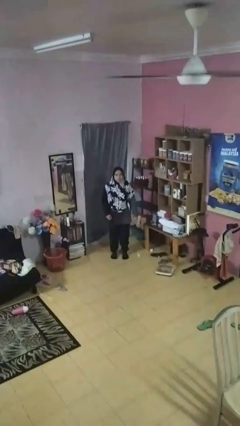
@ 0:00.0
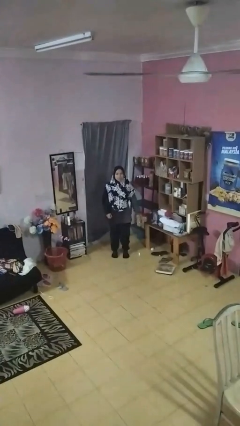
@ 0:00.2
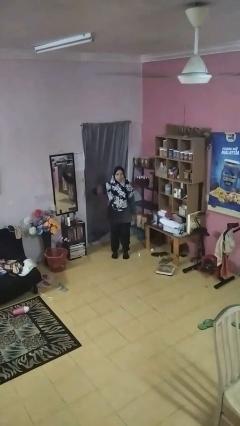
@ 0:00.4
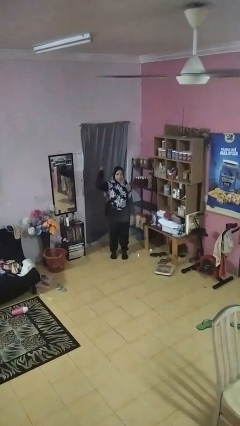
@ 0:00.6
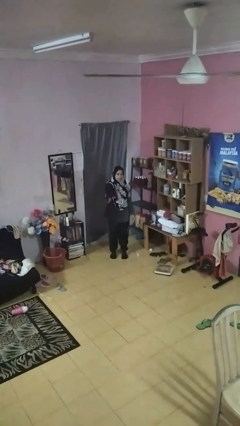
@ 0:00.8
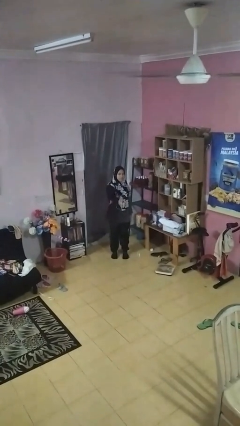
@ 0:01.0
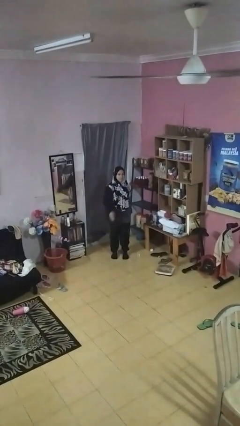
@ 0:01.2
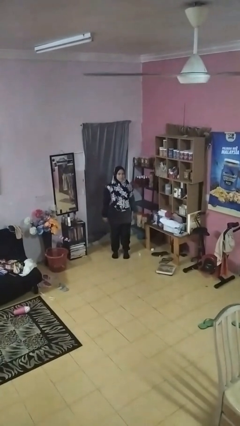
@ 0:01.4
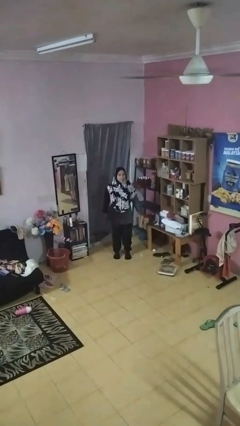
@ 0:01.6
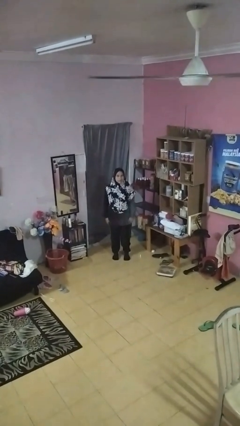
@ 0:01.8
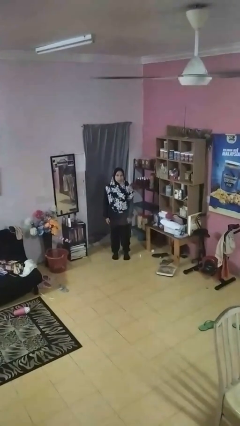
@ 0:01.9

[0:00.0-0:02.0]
person karate chop

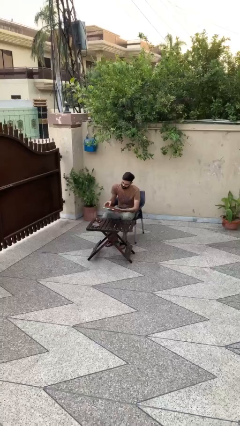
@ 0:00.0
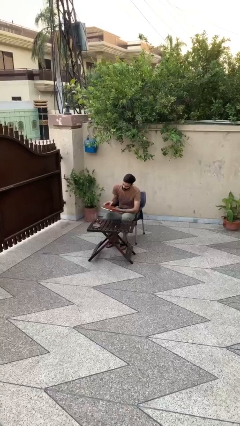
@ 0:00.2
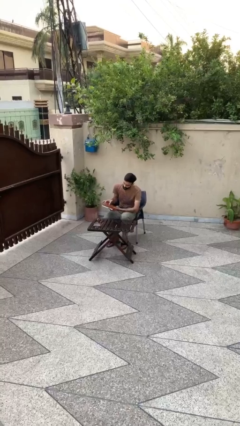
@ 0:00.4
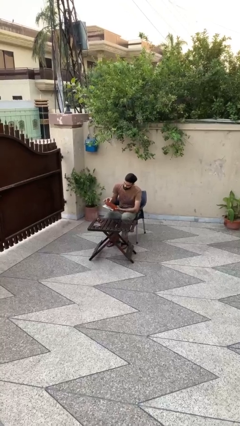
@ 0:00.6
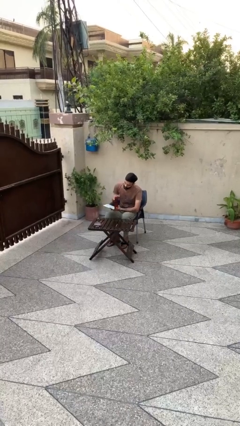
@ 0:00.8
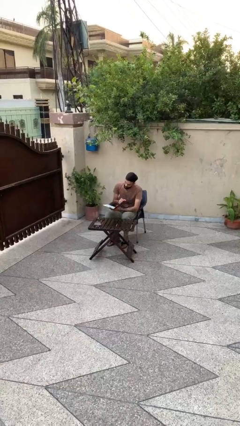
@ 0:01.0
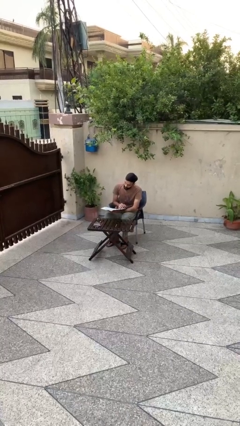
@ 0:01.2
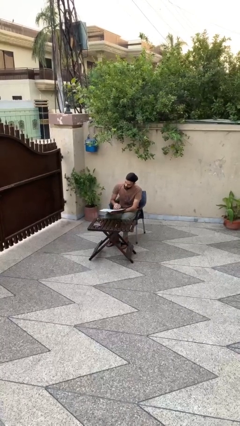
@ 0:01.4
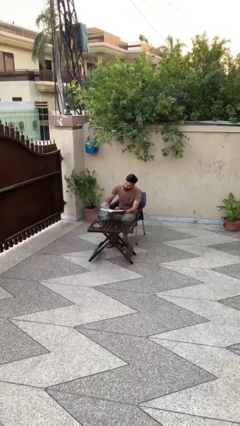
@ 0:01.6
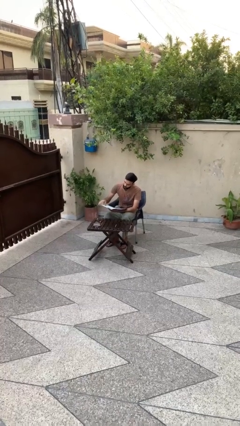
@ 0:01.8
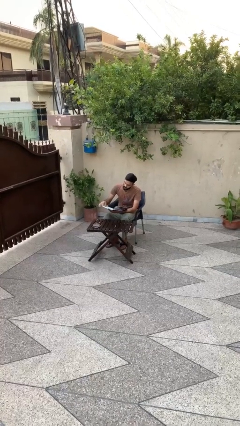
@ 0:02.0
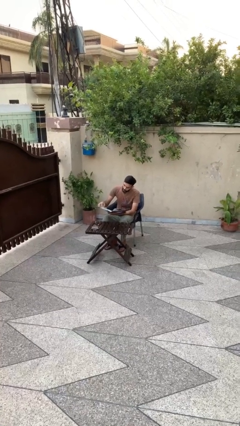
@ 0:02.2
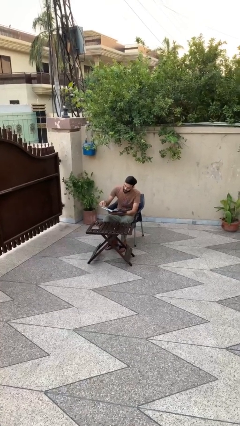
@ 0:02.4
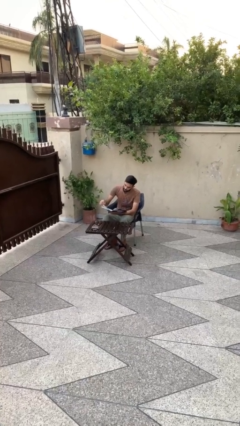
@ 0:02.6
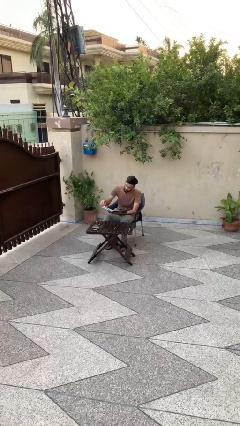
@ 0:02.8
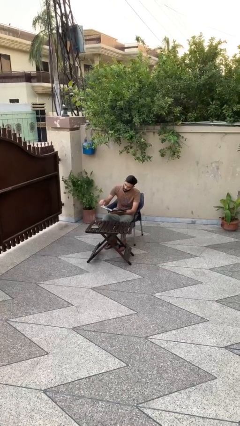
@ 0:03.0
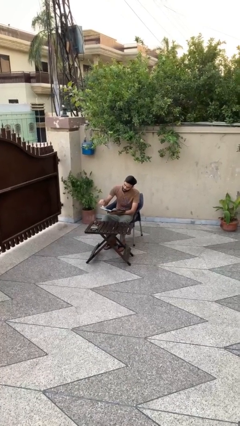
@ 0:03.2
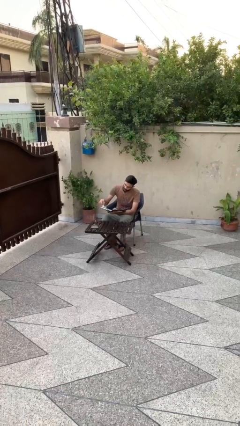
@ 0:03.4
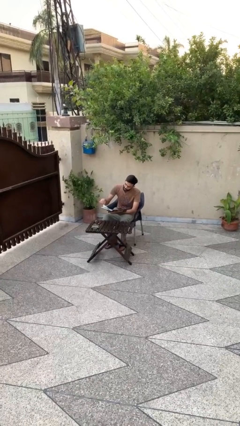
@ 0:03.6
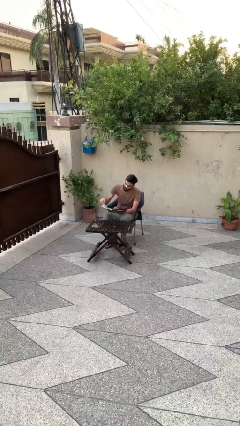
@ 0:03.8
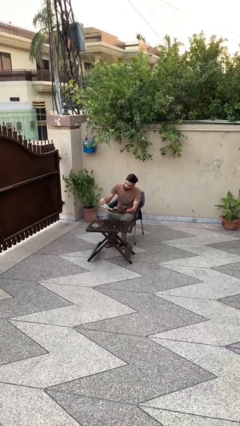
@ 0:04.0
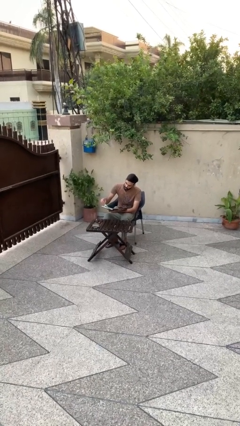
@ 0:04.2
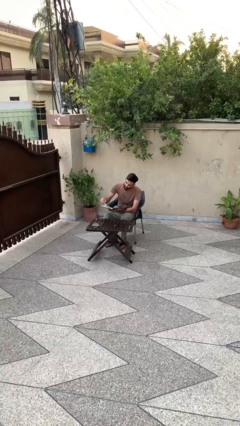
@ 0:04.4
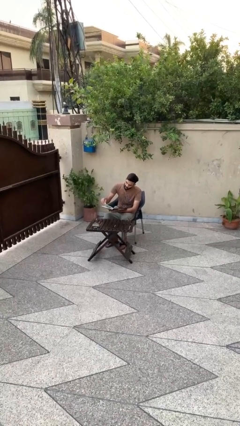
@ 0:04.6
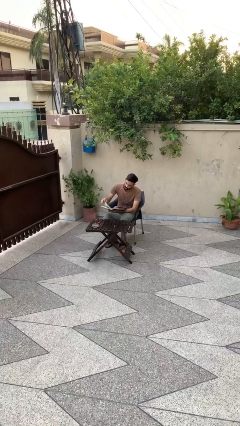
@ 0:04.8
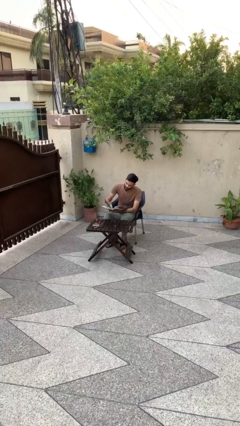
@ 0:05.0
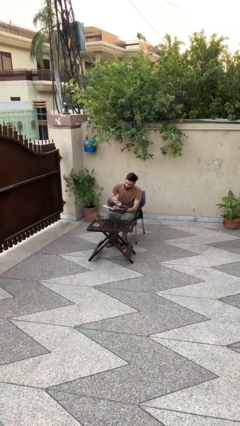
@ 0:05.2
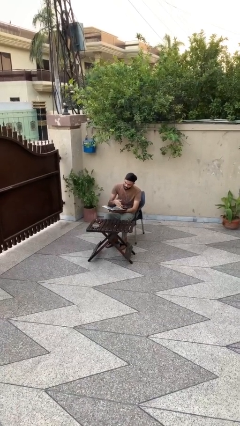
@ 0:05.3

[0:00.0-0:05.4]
person reads document

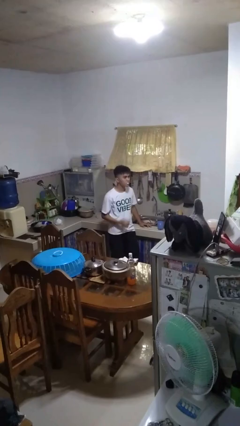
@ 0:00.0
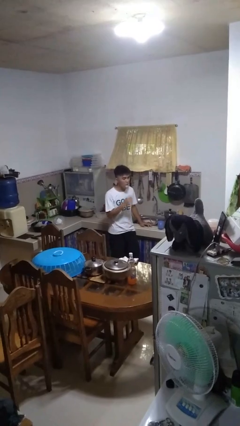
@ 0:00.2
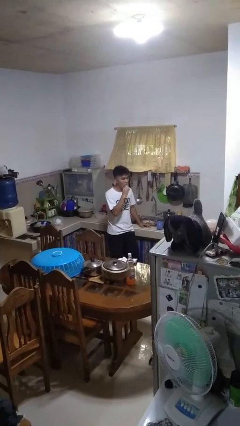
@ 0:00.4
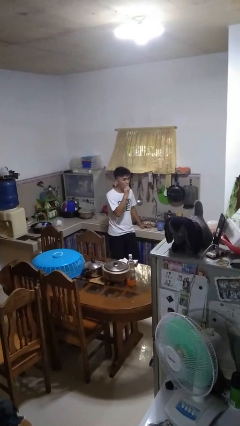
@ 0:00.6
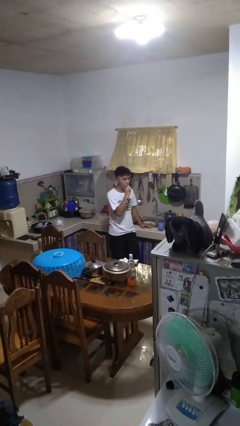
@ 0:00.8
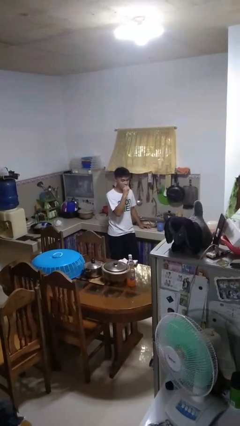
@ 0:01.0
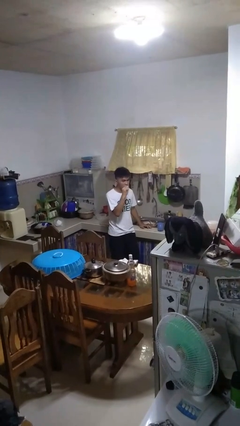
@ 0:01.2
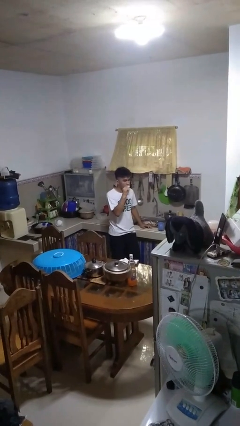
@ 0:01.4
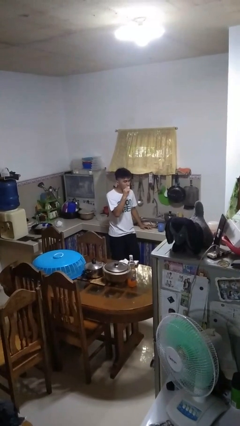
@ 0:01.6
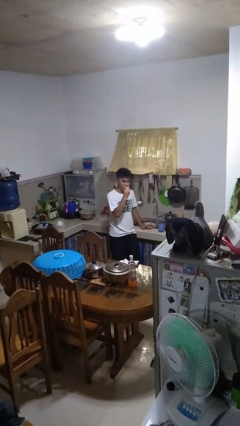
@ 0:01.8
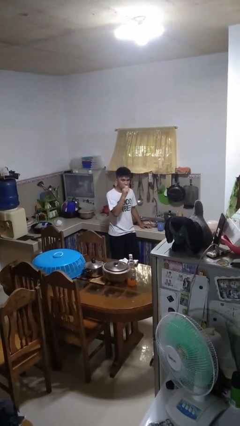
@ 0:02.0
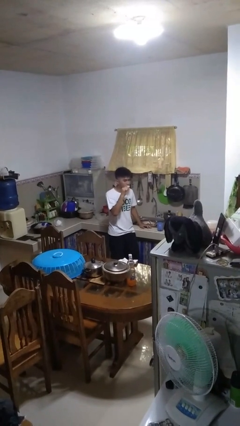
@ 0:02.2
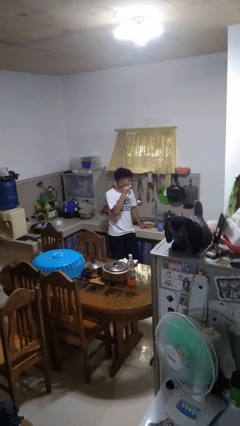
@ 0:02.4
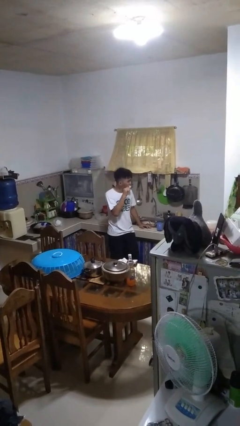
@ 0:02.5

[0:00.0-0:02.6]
person brushes teeth

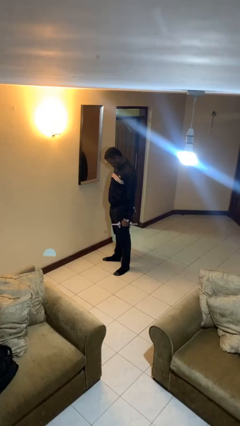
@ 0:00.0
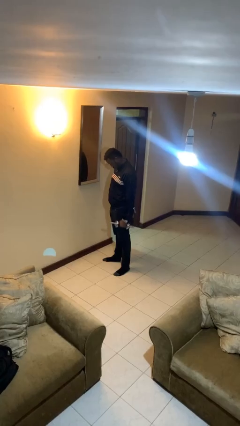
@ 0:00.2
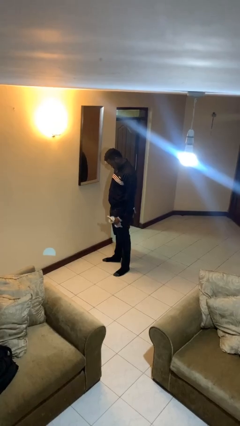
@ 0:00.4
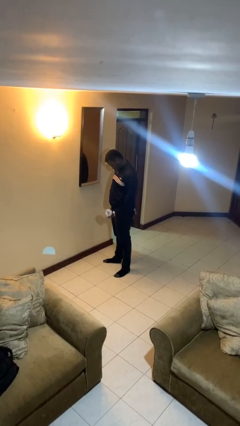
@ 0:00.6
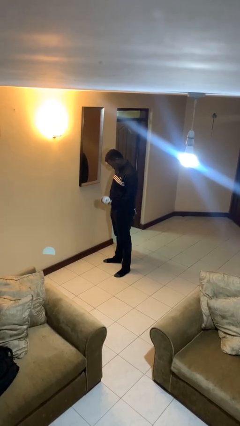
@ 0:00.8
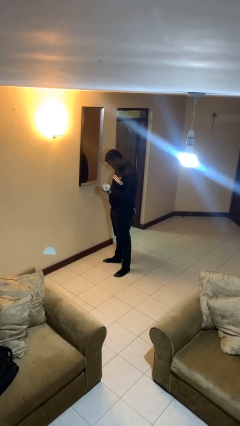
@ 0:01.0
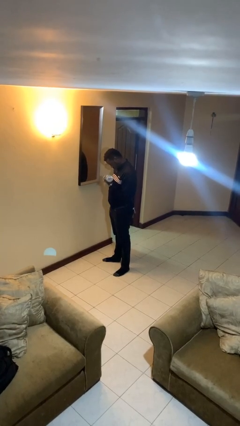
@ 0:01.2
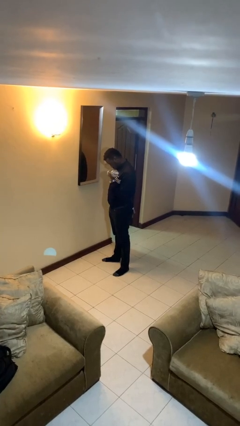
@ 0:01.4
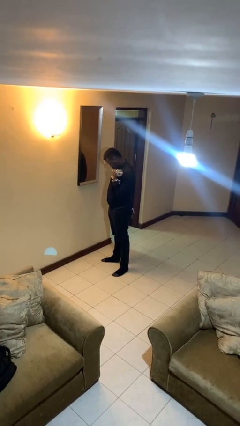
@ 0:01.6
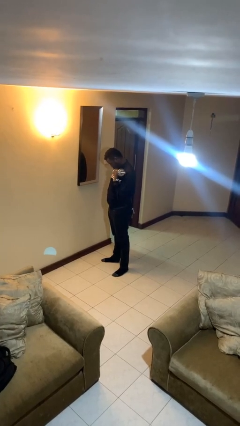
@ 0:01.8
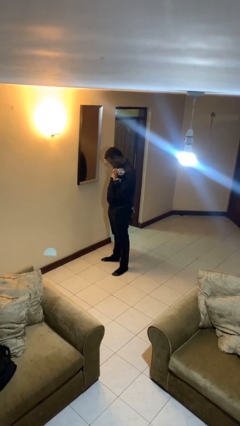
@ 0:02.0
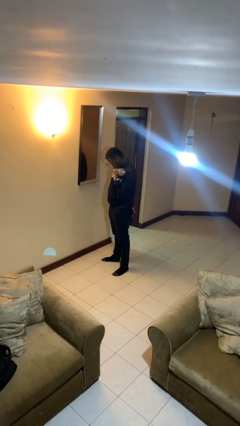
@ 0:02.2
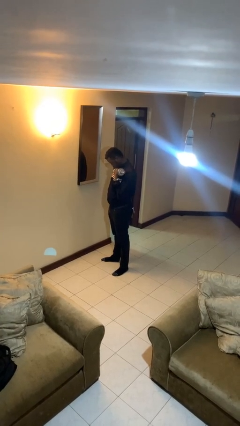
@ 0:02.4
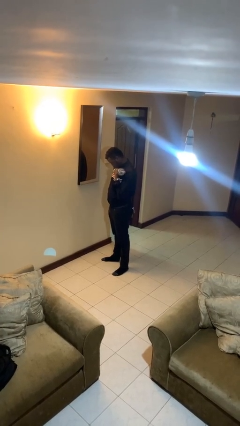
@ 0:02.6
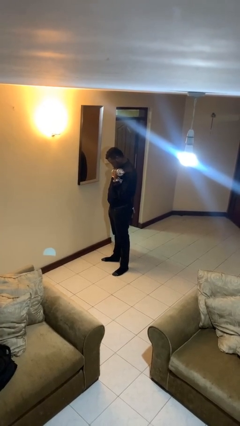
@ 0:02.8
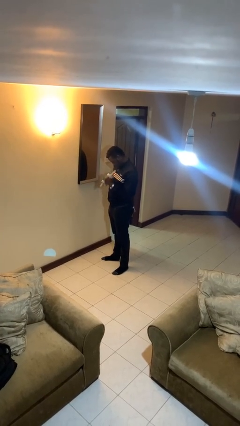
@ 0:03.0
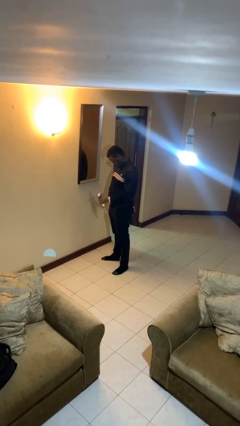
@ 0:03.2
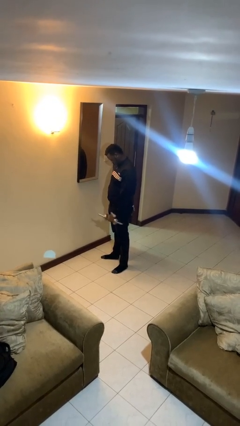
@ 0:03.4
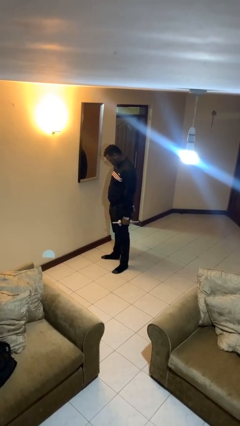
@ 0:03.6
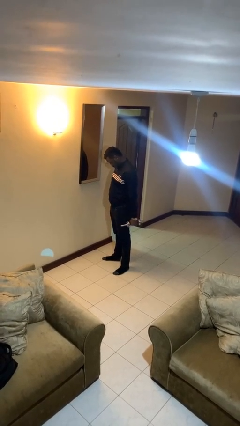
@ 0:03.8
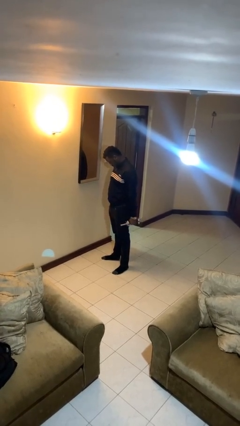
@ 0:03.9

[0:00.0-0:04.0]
person lifts dumbbells

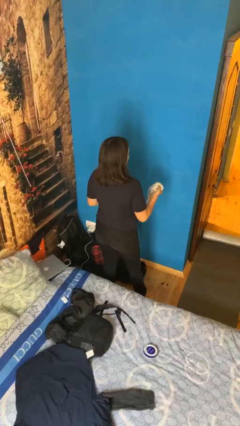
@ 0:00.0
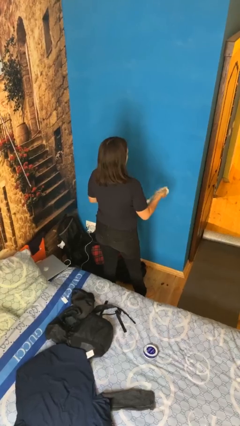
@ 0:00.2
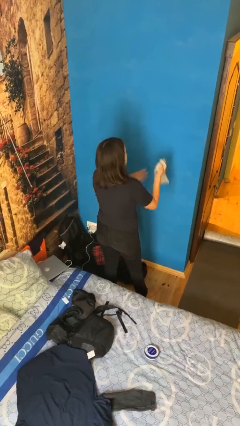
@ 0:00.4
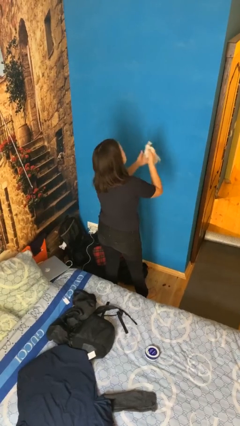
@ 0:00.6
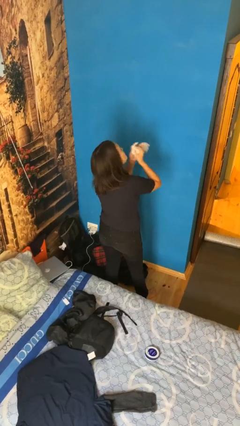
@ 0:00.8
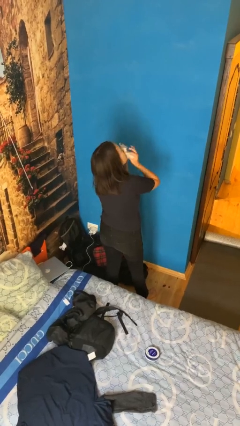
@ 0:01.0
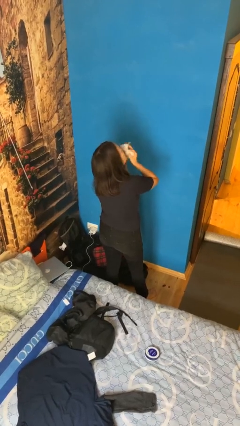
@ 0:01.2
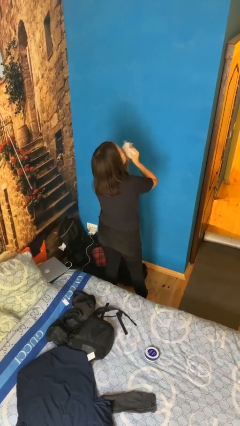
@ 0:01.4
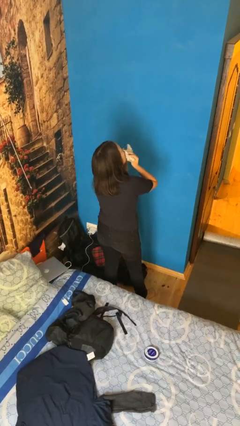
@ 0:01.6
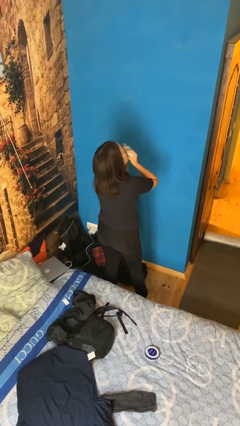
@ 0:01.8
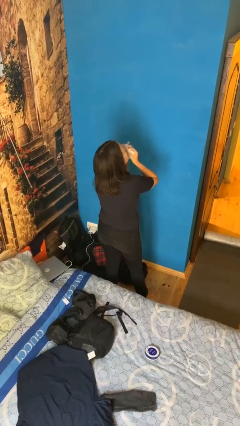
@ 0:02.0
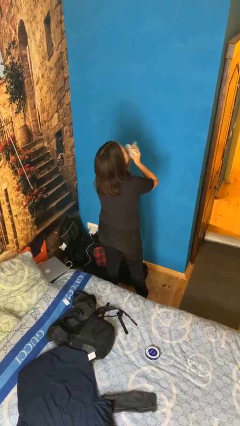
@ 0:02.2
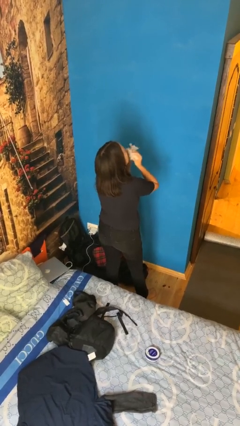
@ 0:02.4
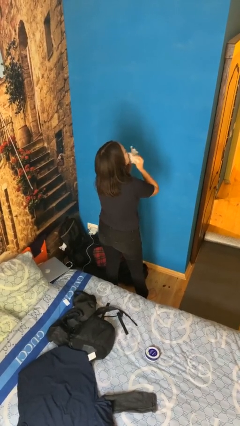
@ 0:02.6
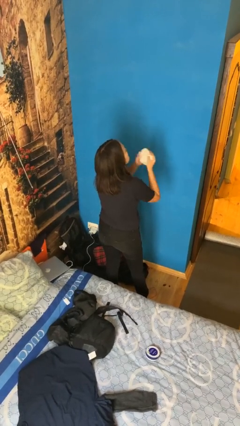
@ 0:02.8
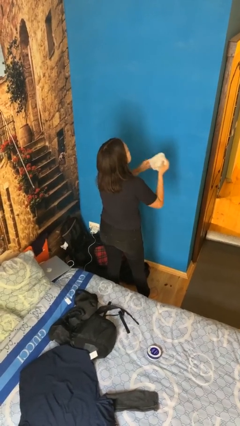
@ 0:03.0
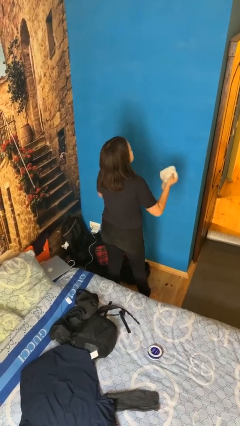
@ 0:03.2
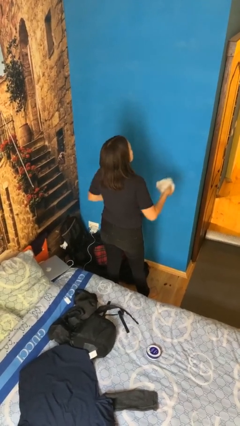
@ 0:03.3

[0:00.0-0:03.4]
person wipes mouth with napkin
